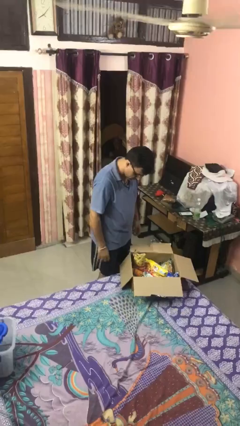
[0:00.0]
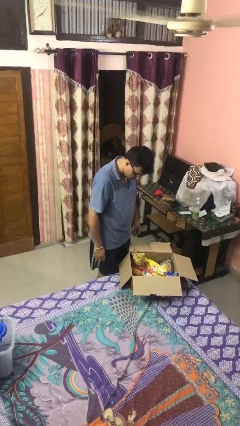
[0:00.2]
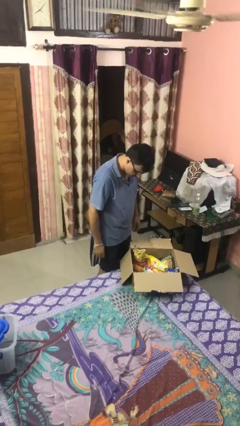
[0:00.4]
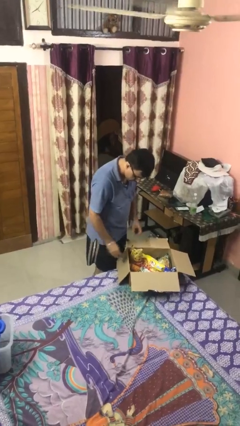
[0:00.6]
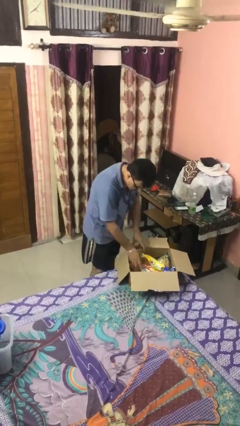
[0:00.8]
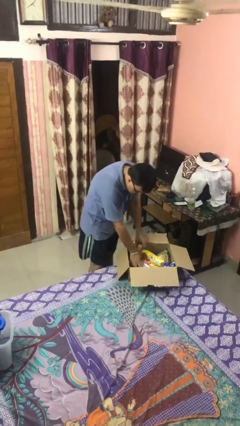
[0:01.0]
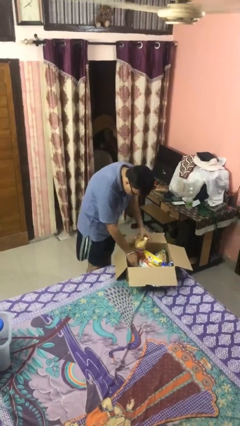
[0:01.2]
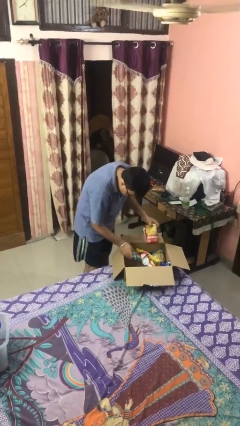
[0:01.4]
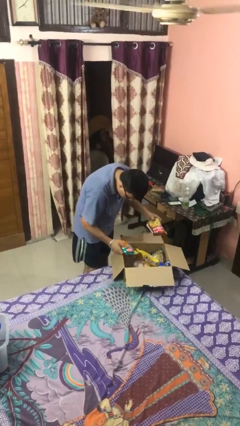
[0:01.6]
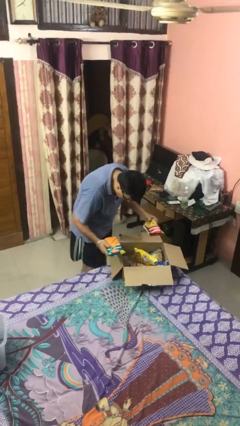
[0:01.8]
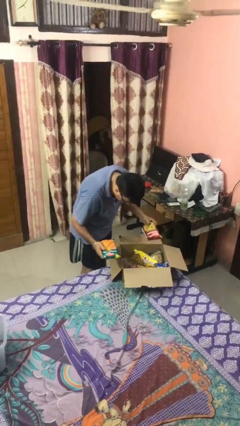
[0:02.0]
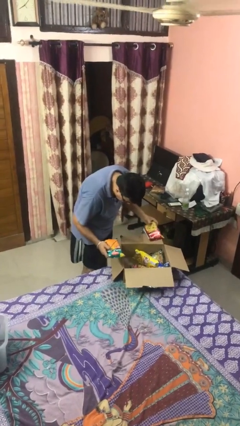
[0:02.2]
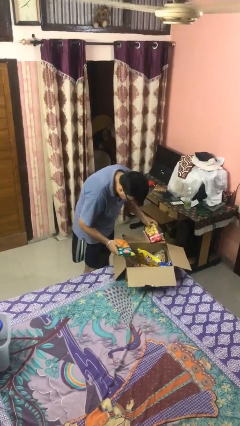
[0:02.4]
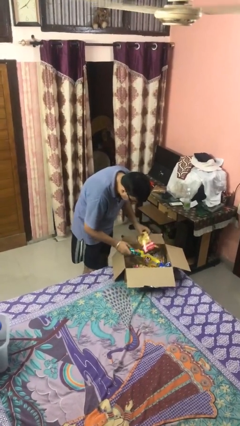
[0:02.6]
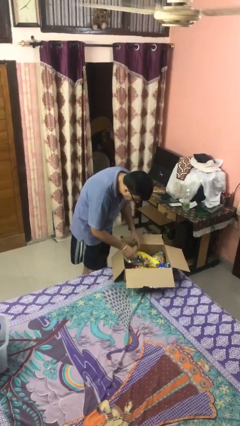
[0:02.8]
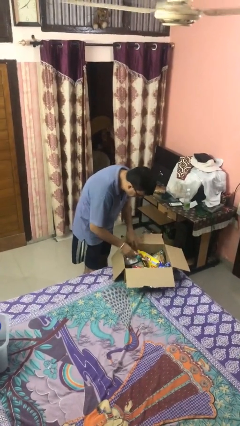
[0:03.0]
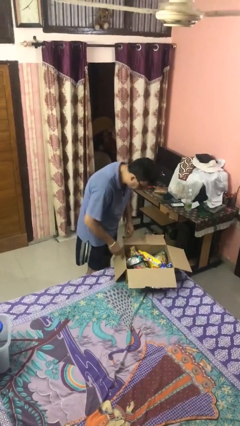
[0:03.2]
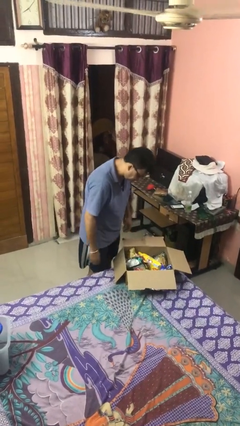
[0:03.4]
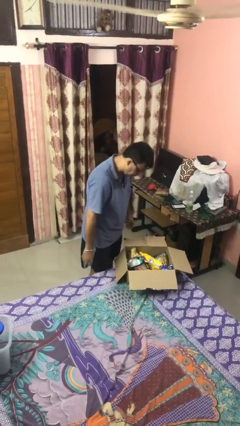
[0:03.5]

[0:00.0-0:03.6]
person searches in box

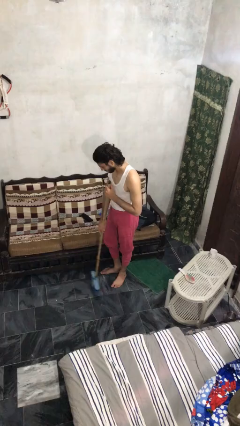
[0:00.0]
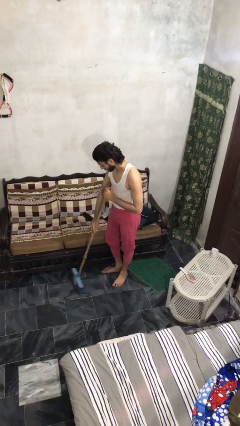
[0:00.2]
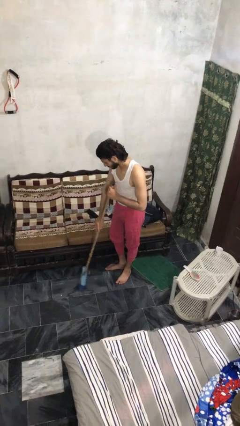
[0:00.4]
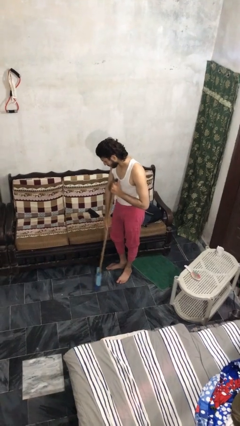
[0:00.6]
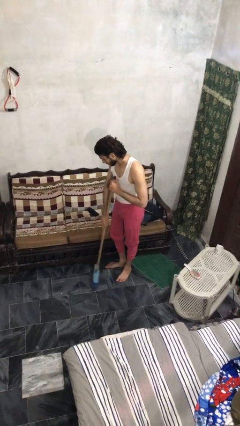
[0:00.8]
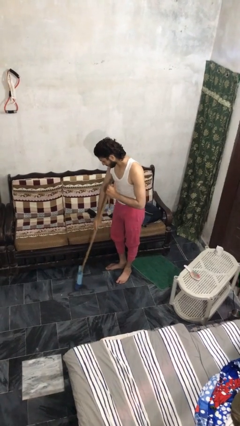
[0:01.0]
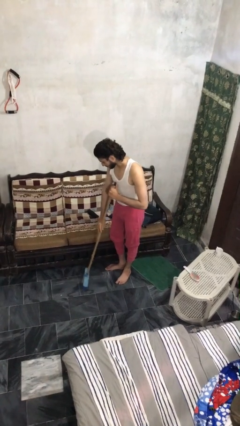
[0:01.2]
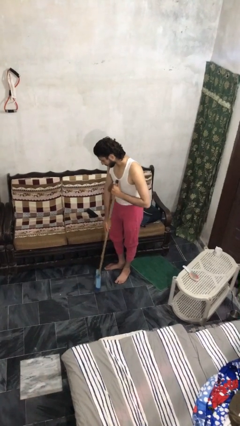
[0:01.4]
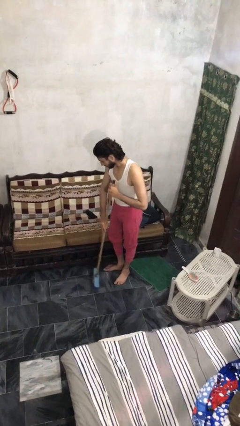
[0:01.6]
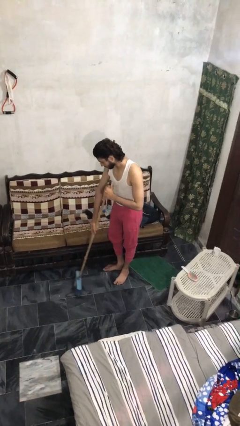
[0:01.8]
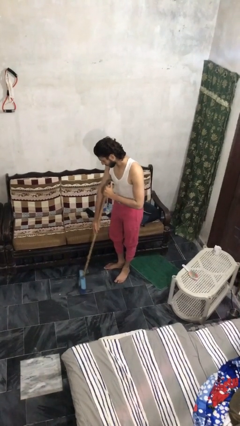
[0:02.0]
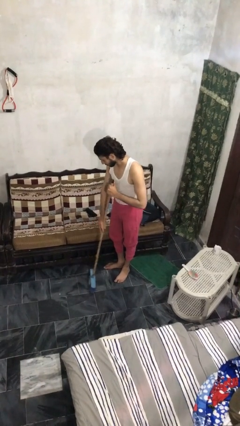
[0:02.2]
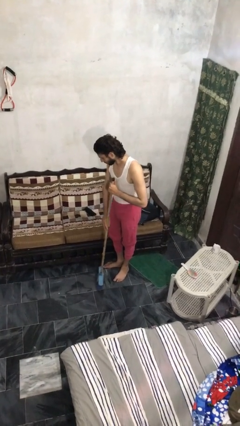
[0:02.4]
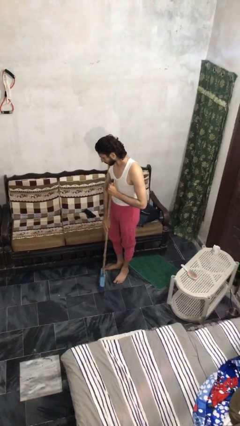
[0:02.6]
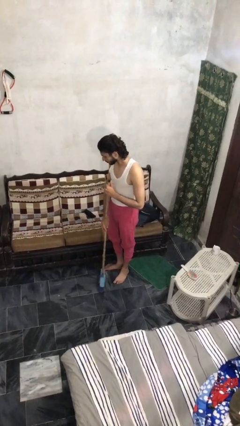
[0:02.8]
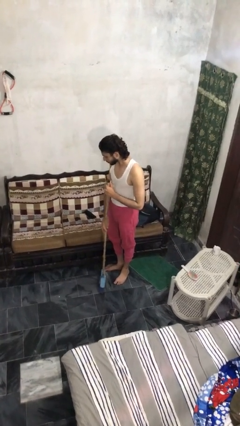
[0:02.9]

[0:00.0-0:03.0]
person sweeps floor

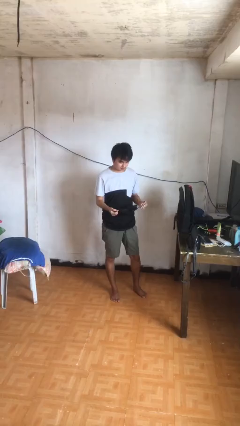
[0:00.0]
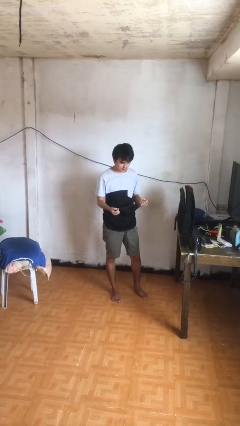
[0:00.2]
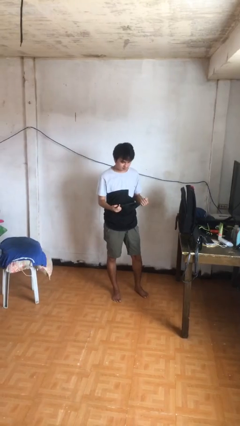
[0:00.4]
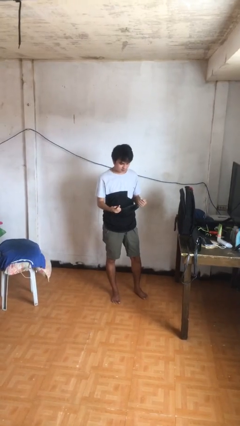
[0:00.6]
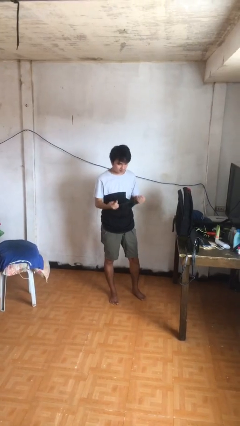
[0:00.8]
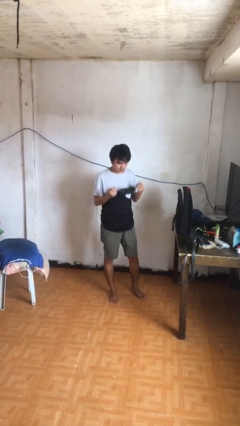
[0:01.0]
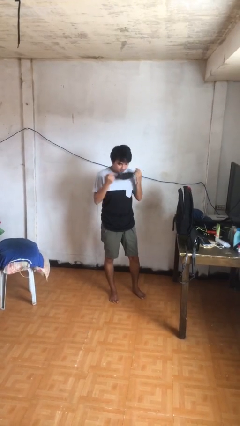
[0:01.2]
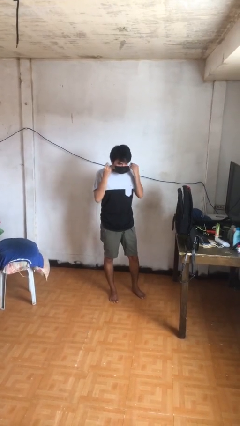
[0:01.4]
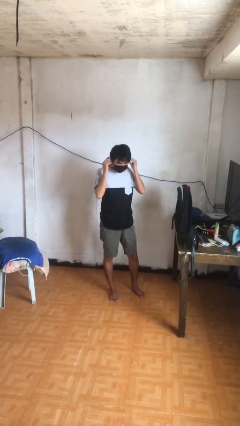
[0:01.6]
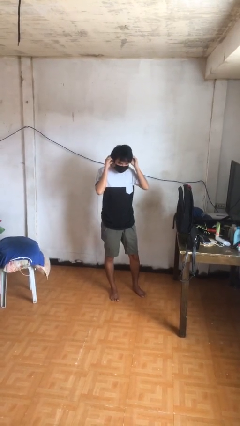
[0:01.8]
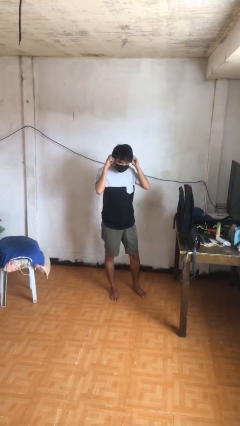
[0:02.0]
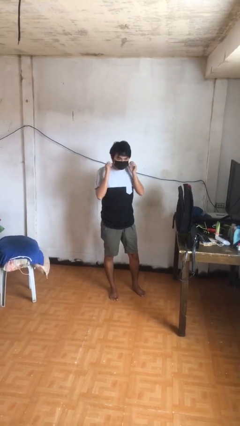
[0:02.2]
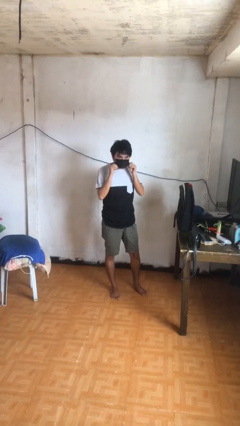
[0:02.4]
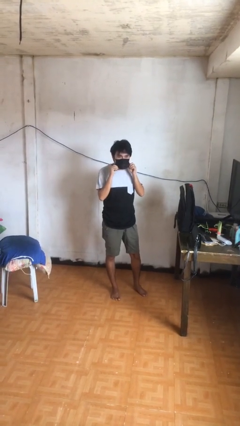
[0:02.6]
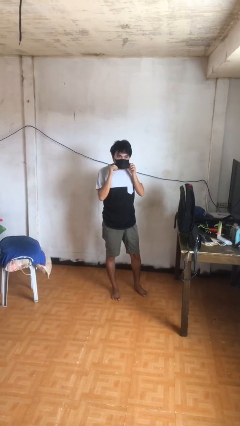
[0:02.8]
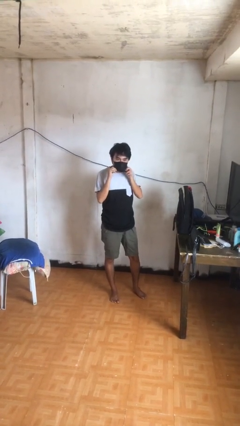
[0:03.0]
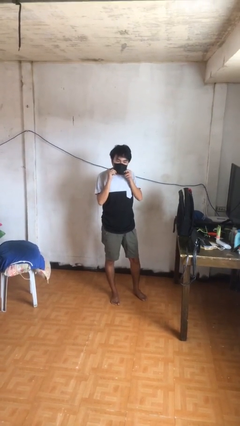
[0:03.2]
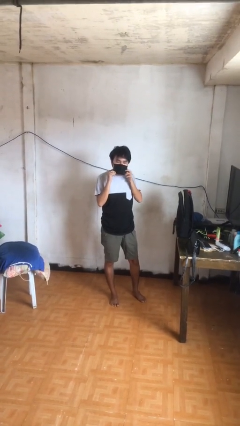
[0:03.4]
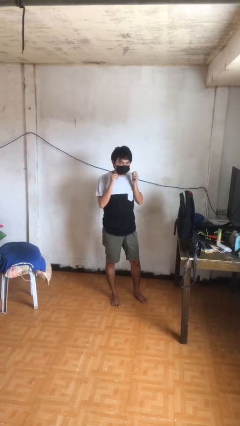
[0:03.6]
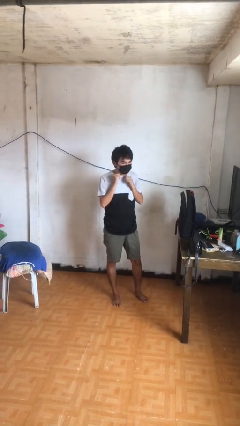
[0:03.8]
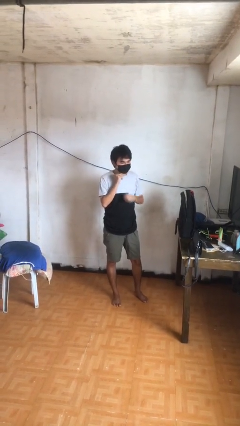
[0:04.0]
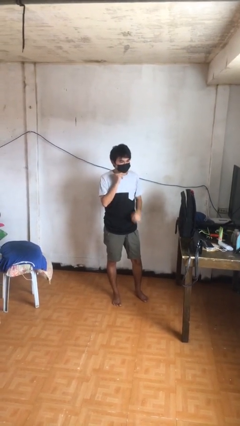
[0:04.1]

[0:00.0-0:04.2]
person puts on facemask

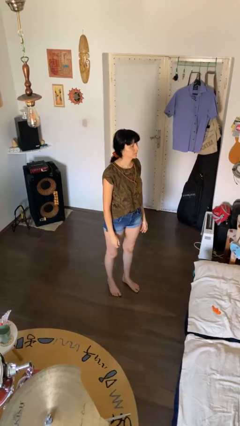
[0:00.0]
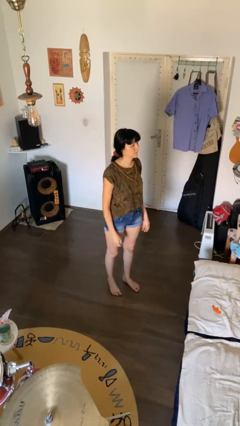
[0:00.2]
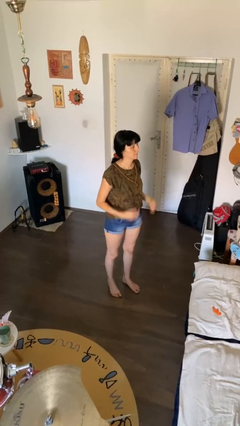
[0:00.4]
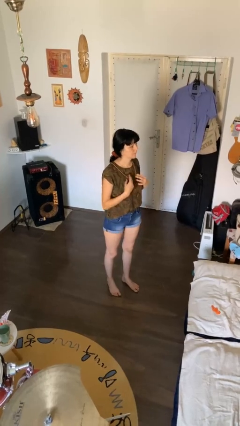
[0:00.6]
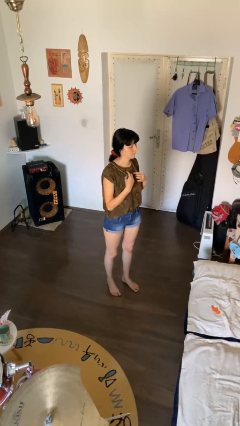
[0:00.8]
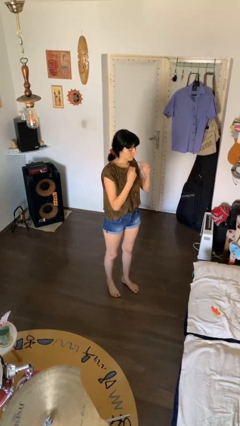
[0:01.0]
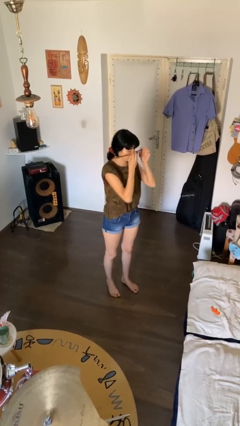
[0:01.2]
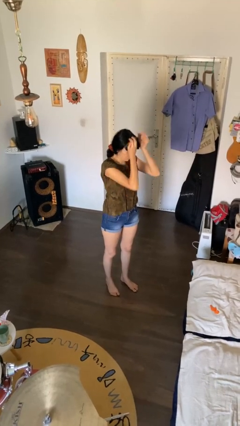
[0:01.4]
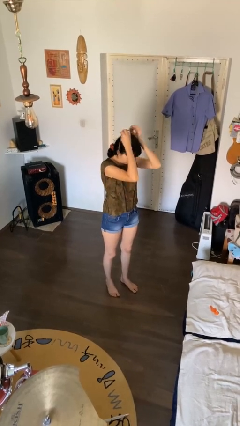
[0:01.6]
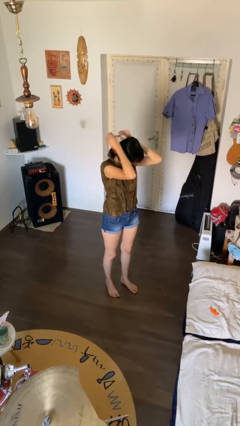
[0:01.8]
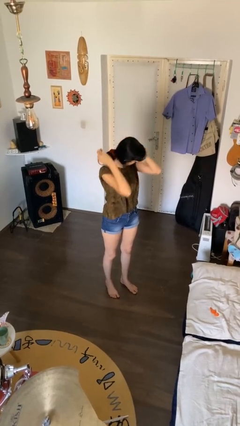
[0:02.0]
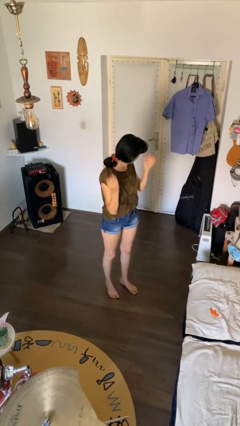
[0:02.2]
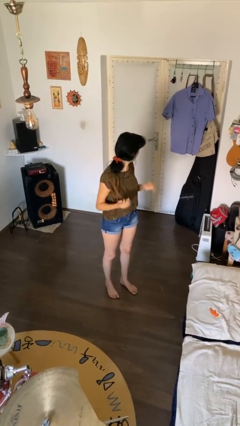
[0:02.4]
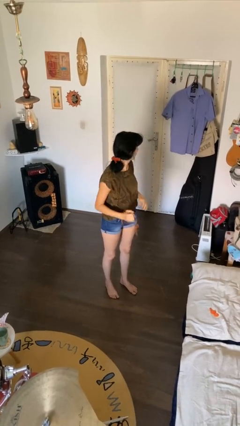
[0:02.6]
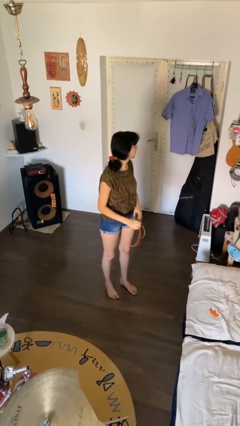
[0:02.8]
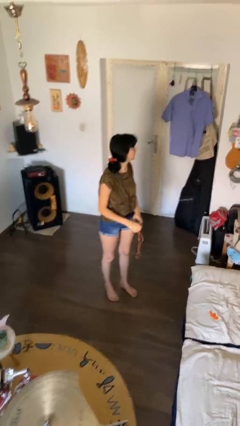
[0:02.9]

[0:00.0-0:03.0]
person takes off necklace

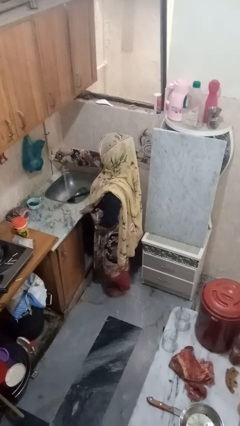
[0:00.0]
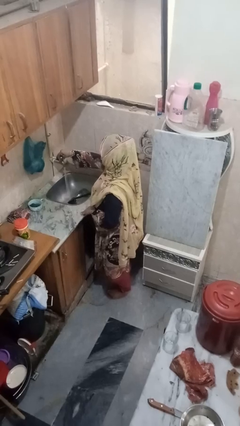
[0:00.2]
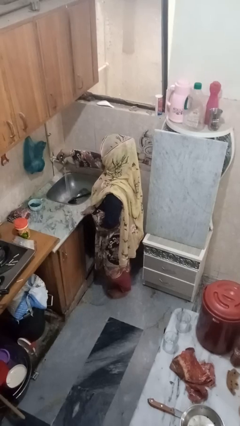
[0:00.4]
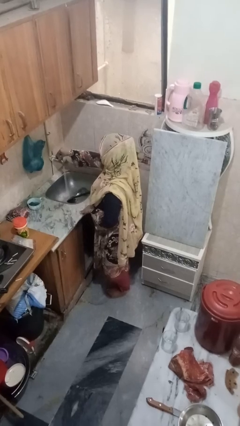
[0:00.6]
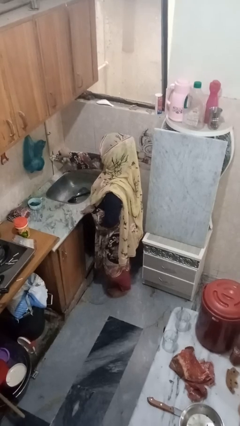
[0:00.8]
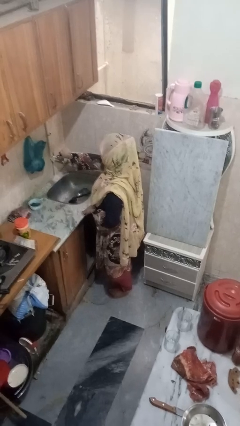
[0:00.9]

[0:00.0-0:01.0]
person turns off faucet

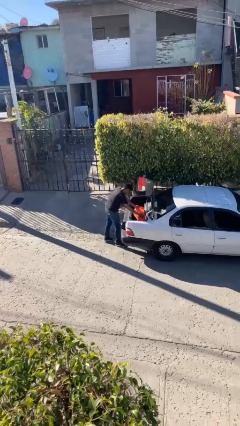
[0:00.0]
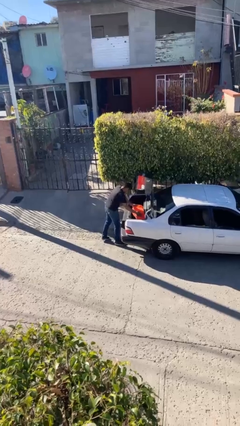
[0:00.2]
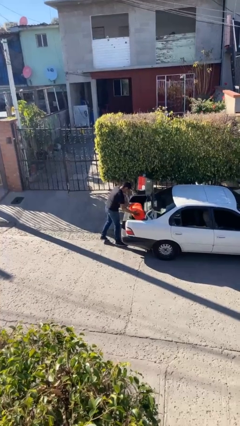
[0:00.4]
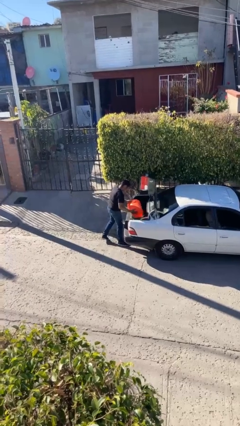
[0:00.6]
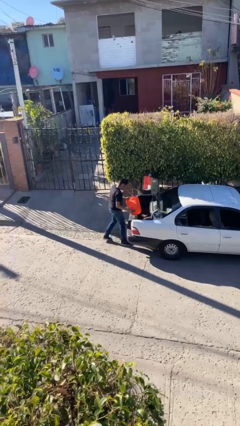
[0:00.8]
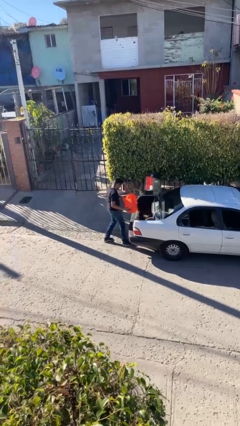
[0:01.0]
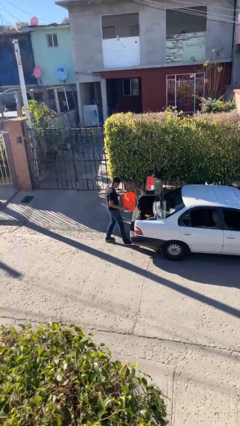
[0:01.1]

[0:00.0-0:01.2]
person unloads car

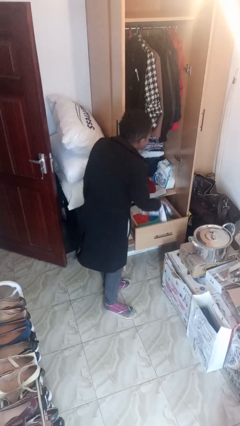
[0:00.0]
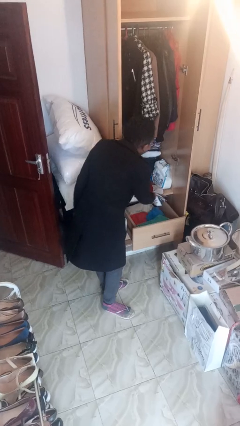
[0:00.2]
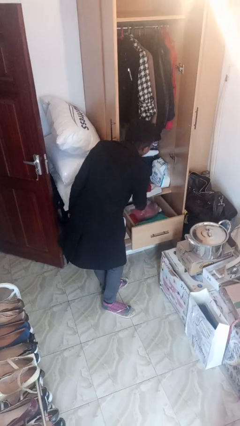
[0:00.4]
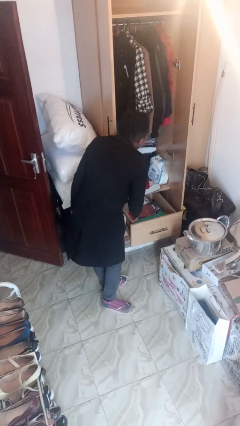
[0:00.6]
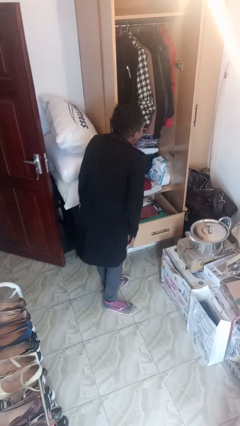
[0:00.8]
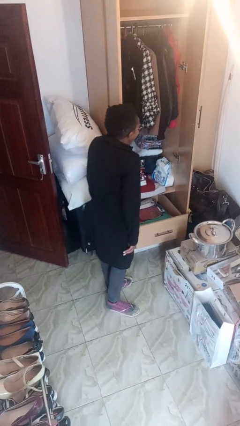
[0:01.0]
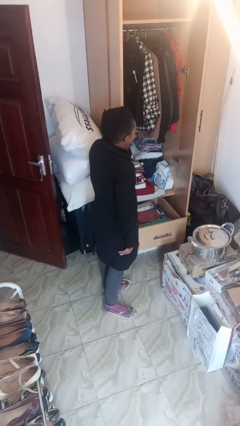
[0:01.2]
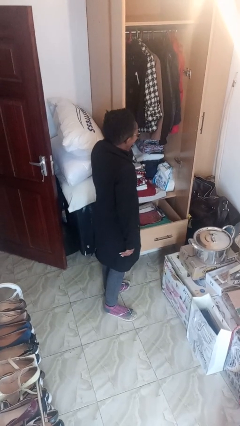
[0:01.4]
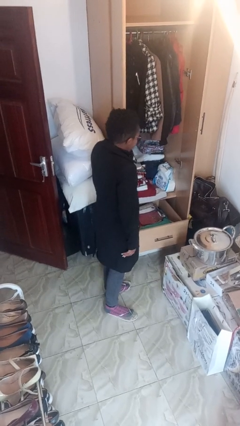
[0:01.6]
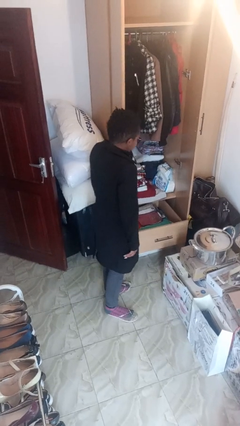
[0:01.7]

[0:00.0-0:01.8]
person puts clothes into dresser
